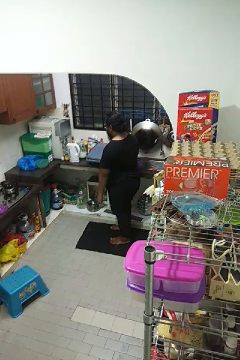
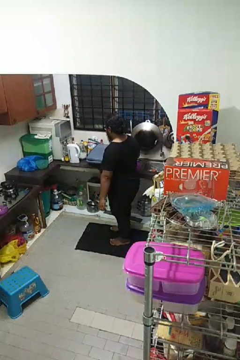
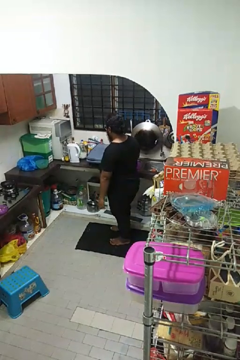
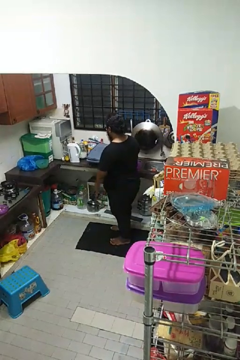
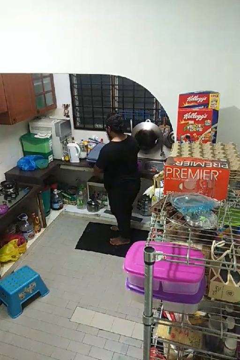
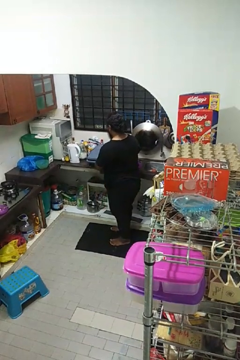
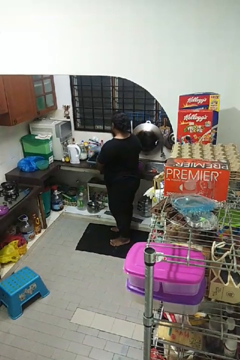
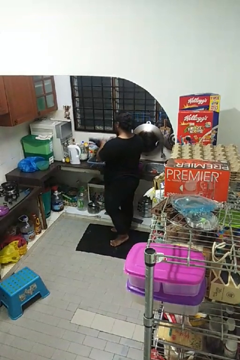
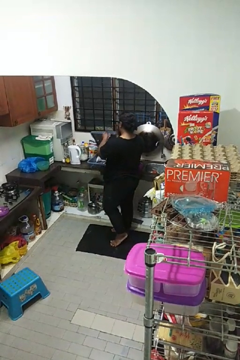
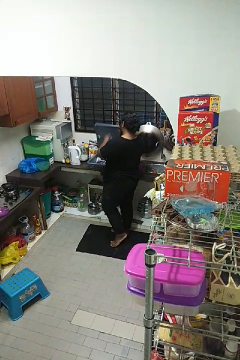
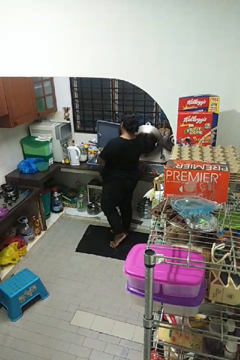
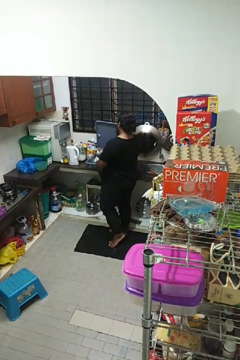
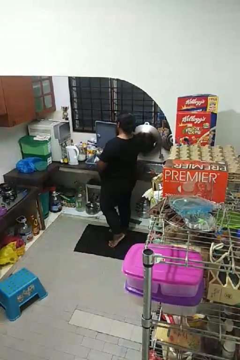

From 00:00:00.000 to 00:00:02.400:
person opens dishwasher

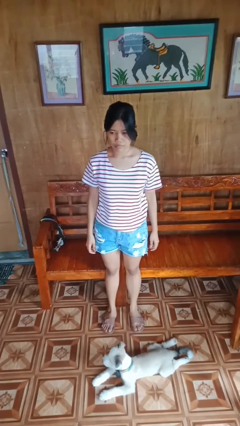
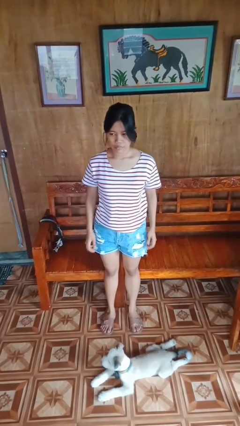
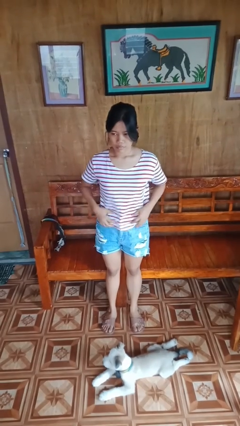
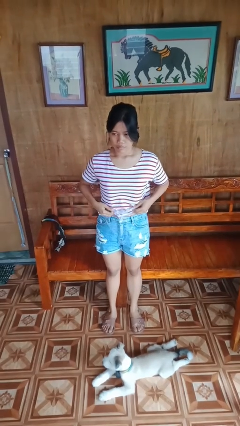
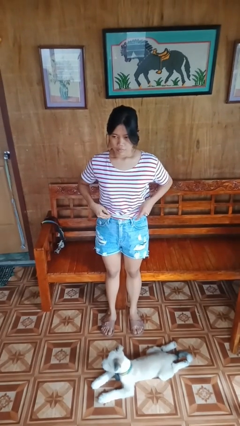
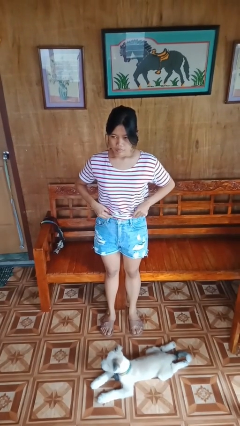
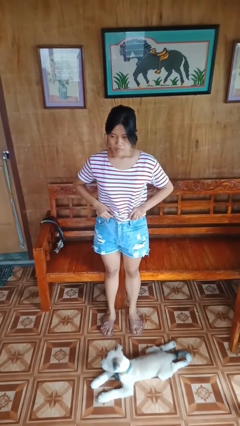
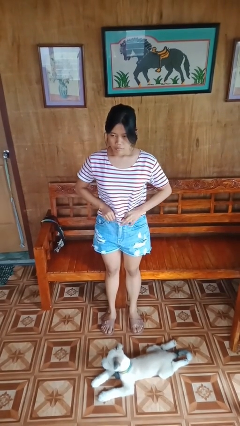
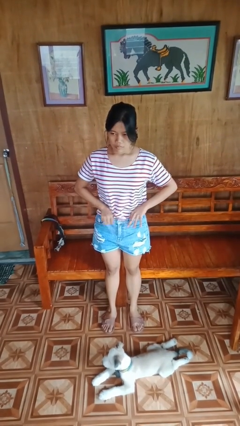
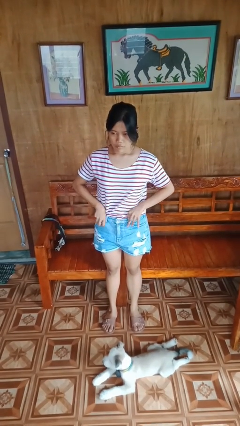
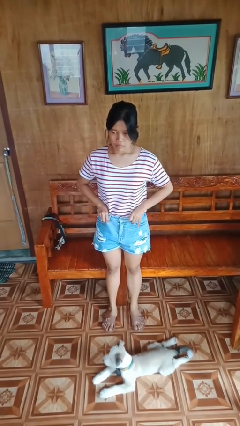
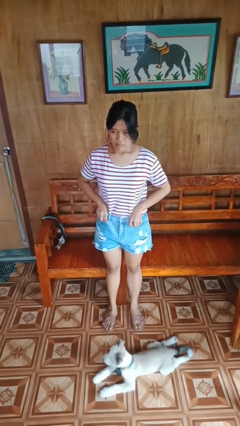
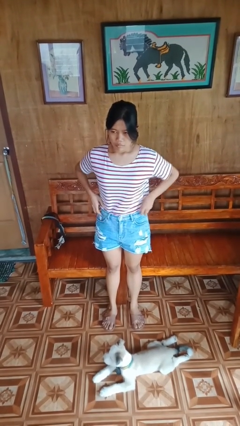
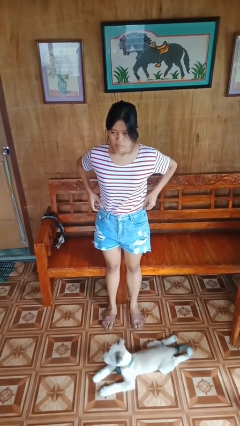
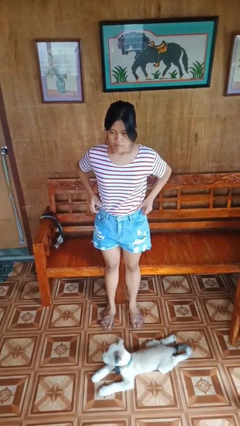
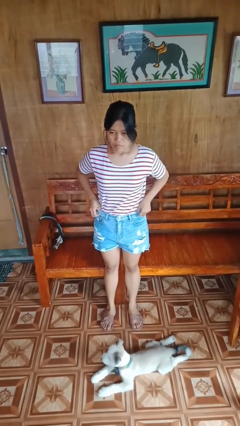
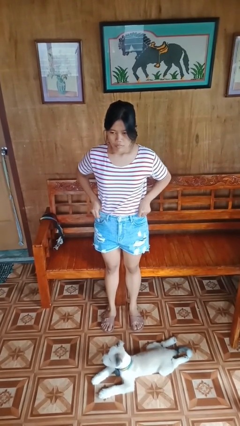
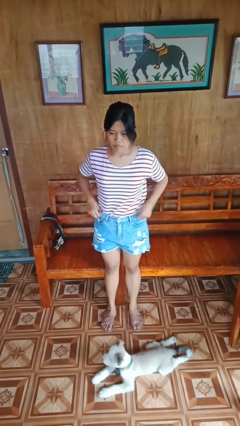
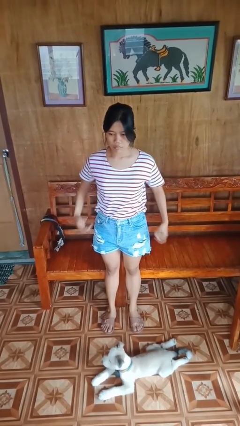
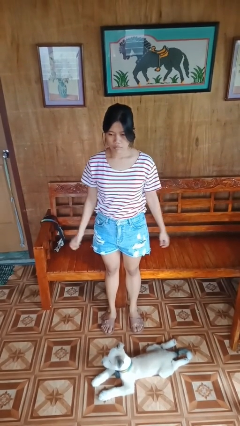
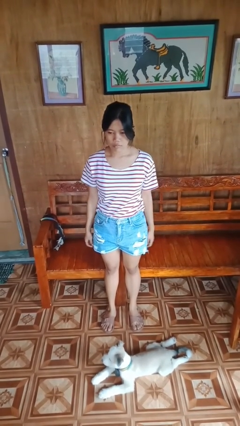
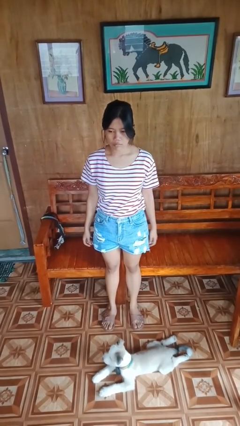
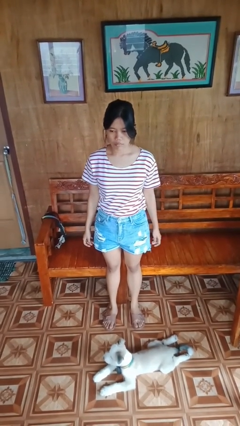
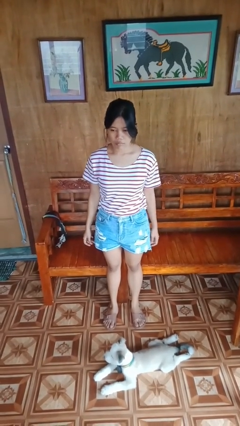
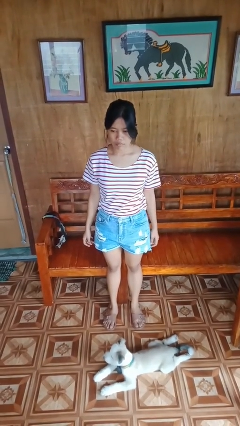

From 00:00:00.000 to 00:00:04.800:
person tucks in shirt

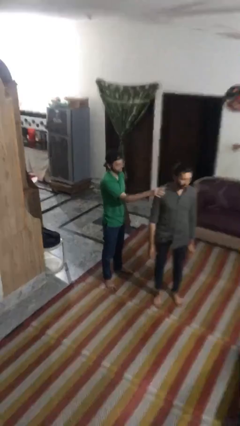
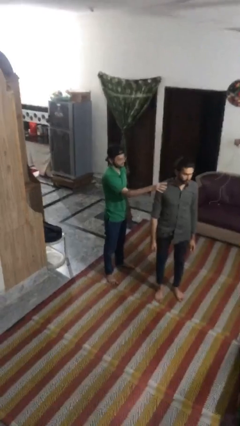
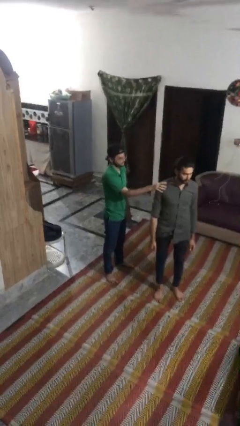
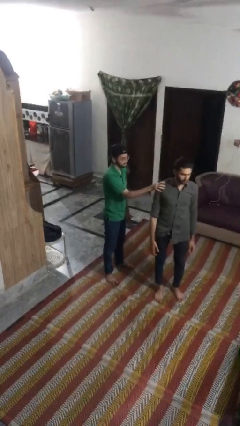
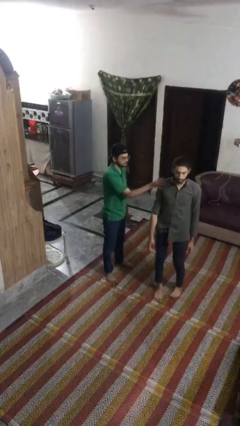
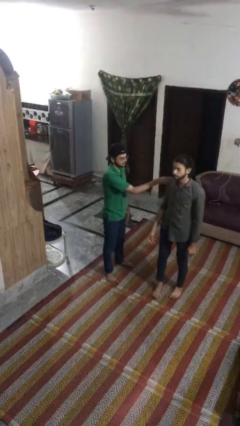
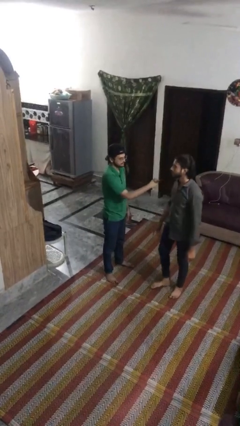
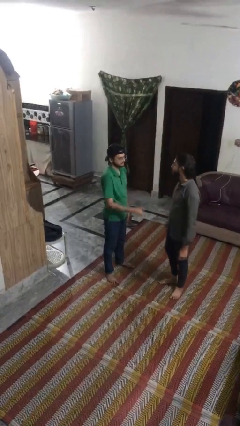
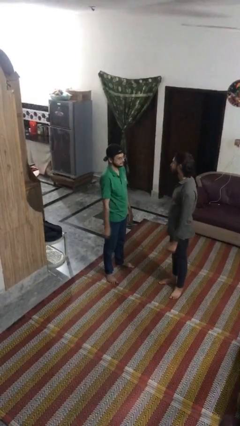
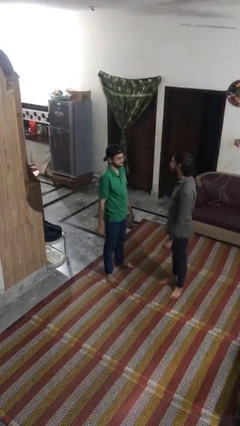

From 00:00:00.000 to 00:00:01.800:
person spins person around

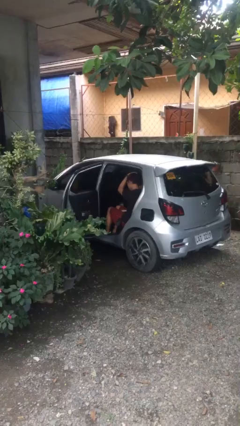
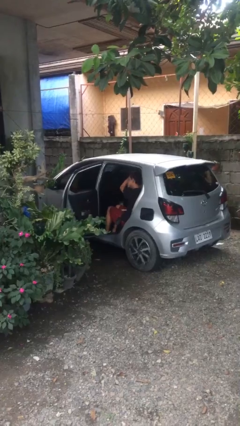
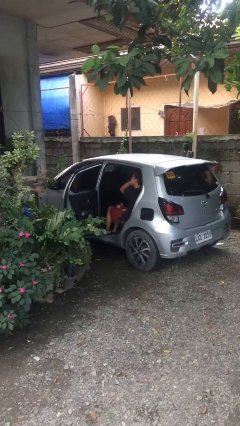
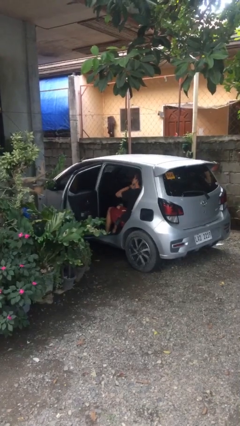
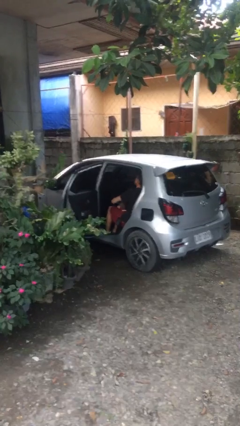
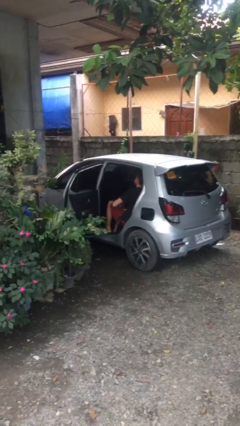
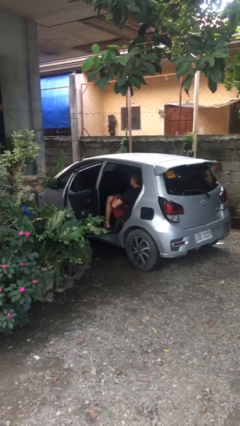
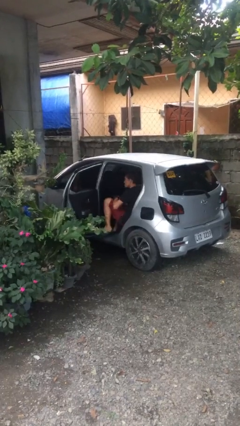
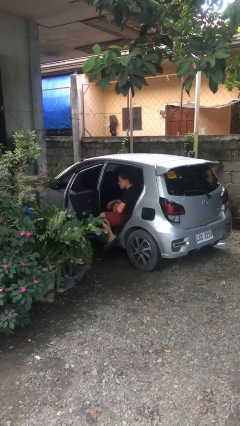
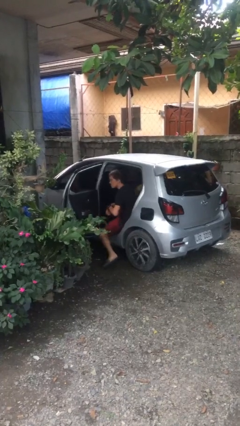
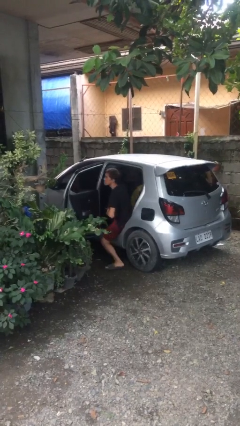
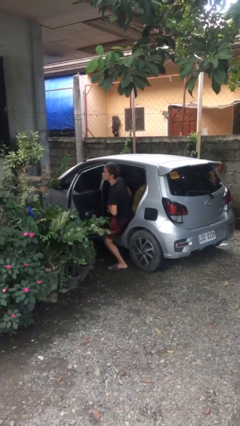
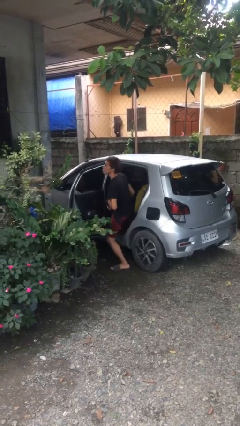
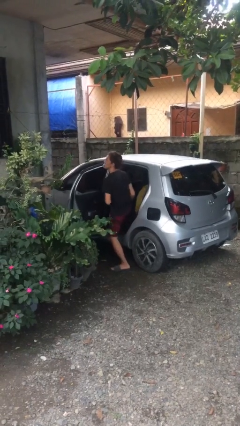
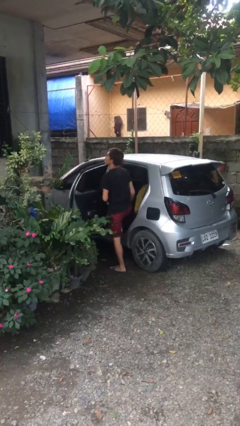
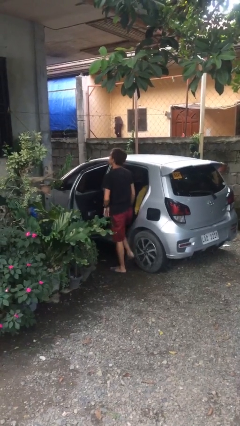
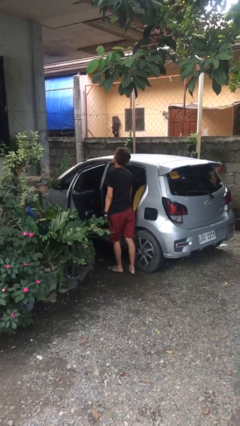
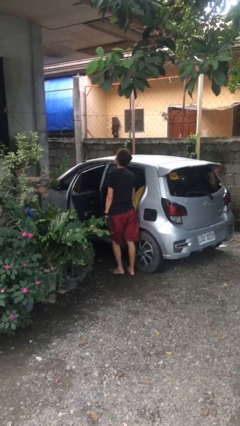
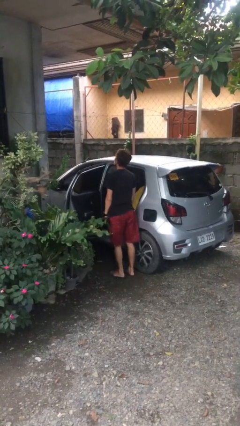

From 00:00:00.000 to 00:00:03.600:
person exits car

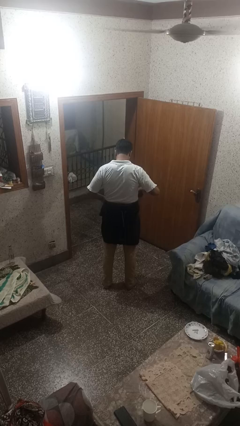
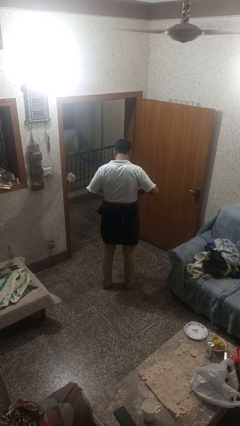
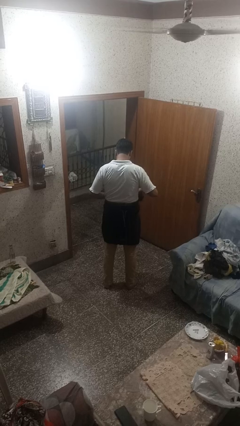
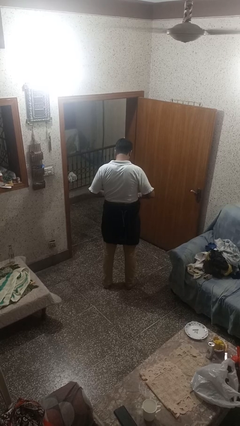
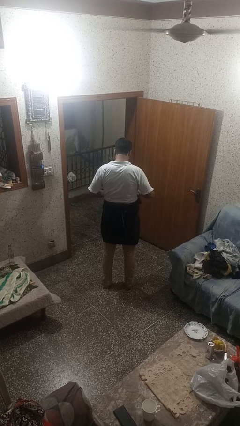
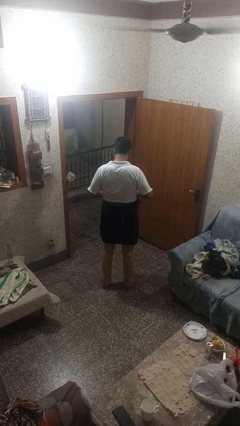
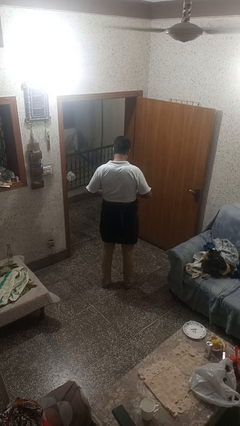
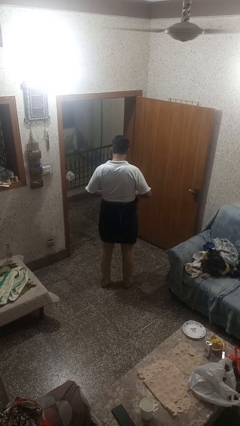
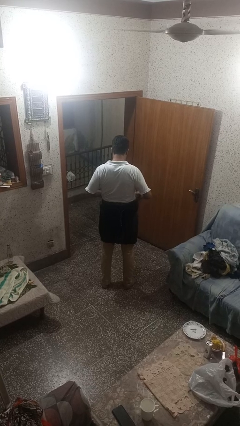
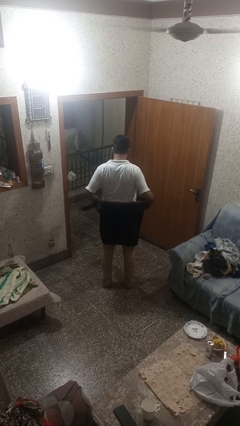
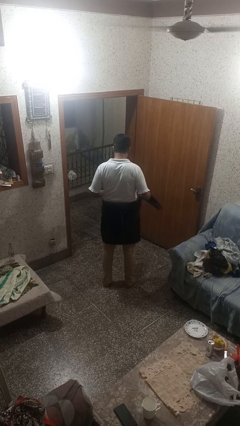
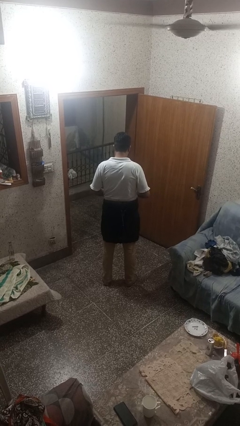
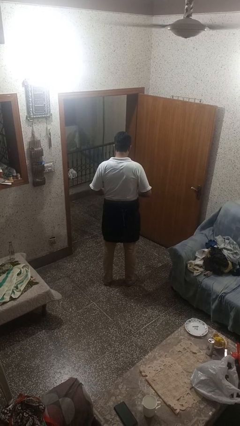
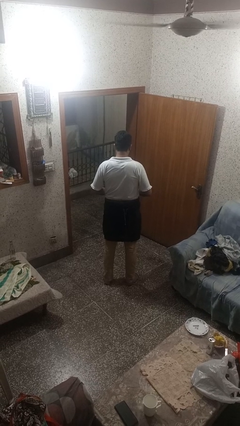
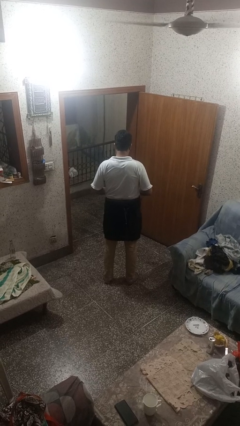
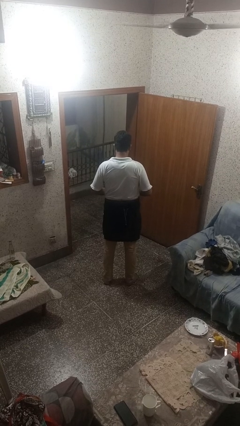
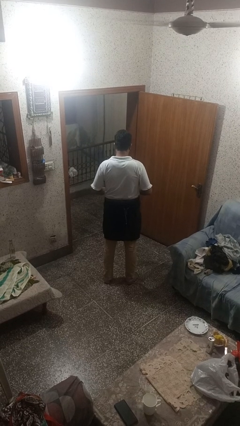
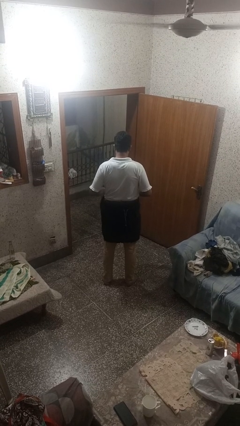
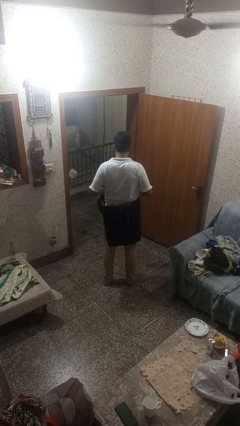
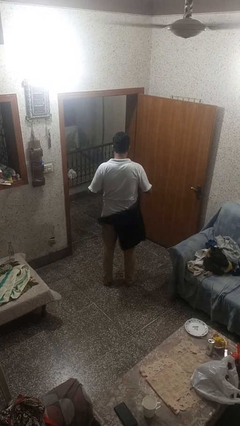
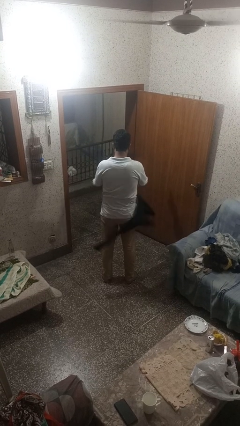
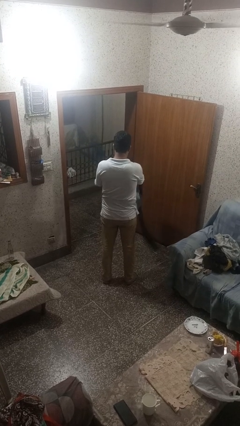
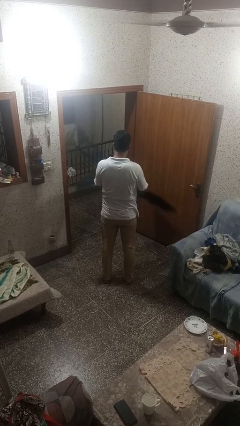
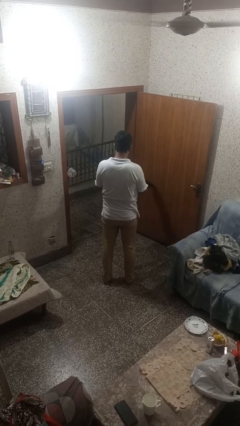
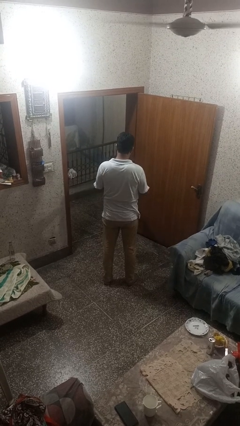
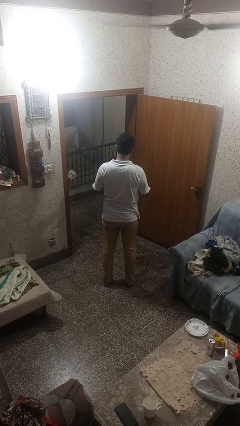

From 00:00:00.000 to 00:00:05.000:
person unties jacket around waist

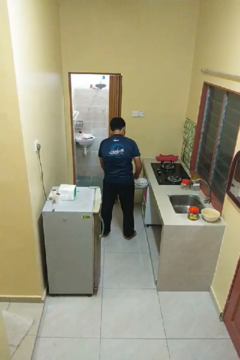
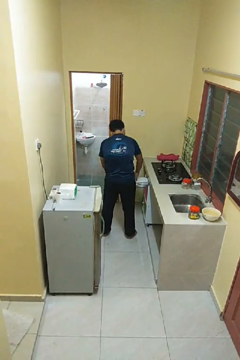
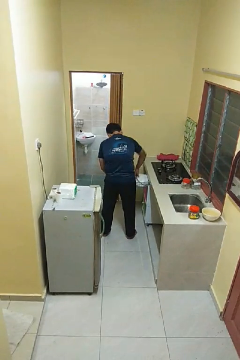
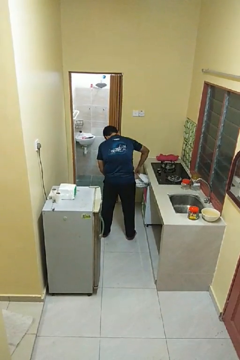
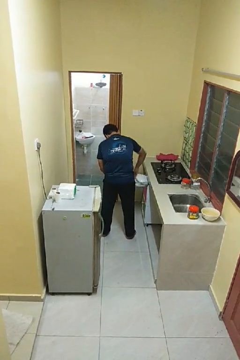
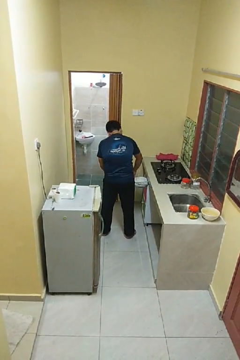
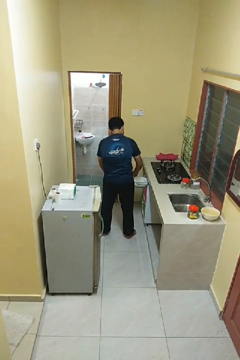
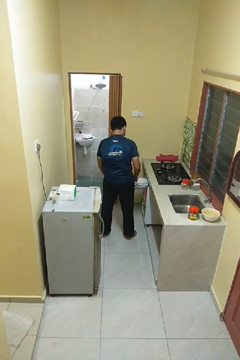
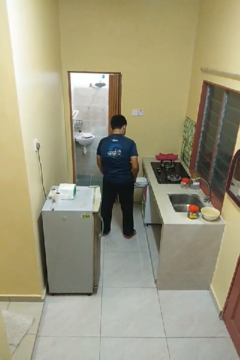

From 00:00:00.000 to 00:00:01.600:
person searches in kitchen drawer
